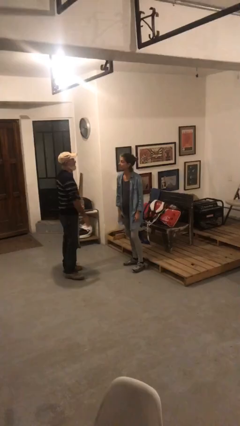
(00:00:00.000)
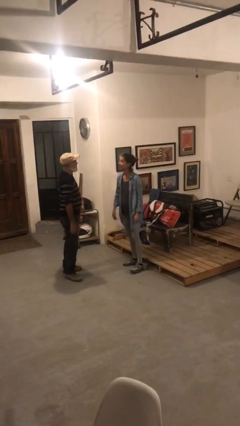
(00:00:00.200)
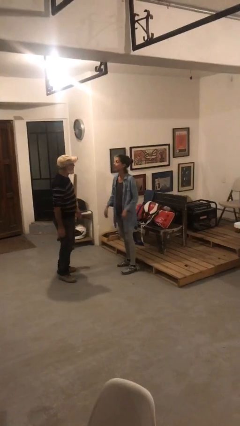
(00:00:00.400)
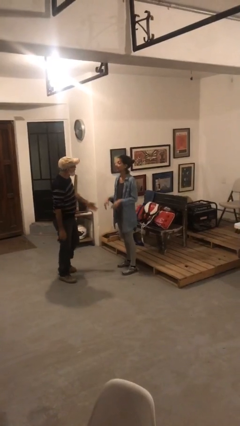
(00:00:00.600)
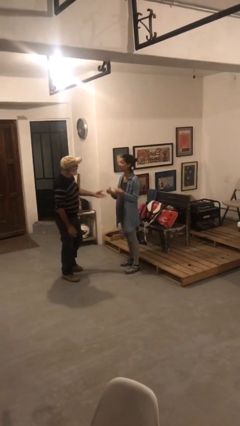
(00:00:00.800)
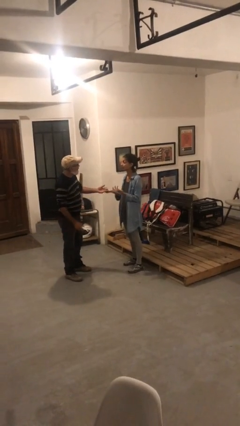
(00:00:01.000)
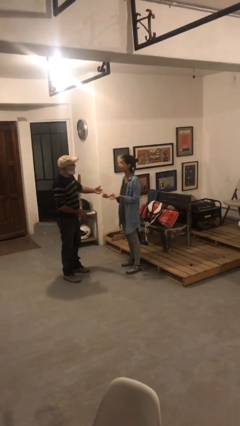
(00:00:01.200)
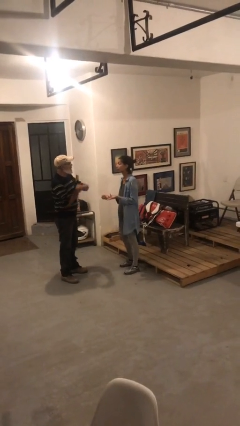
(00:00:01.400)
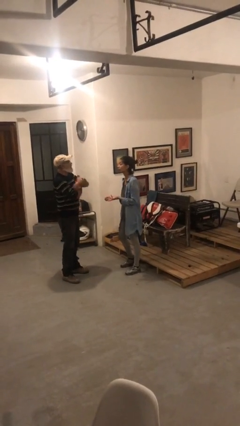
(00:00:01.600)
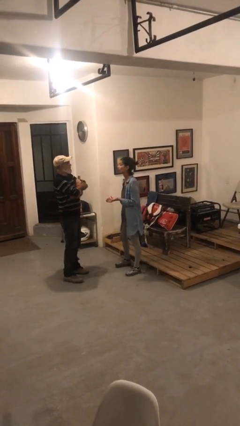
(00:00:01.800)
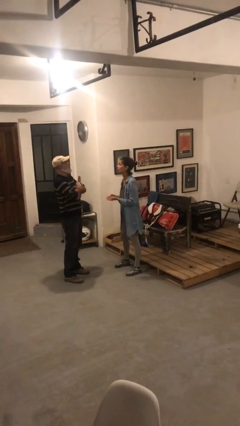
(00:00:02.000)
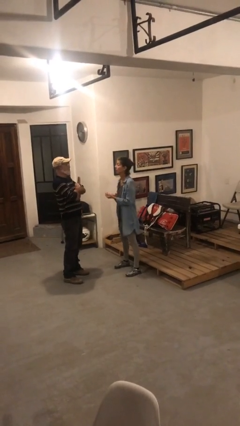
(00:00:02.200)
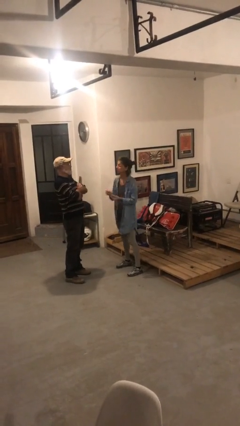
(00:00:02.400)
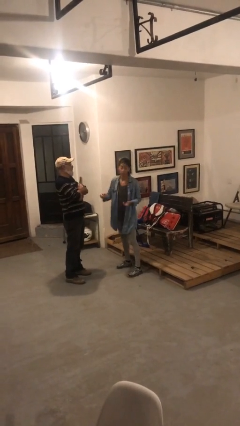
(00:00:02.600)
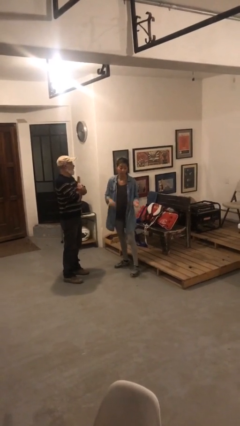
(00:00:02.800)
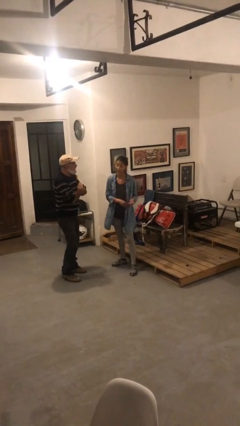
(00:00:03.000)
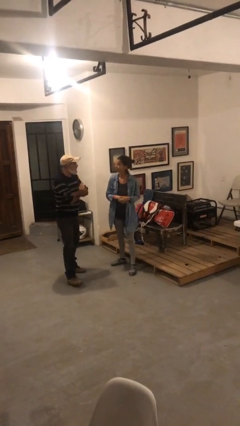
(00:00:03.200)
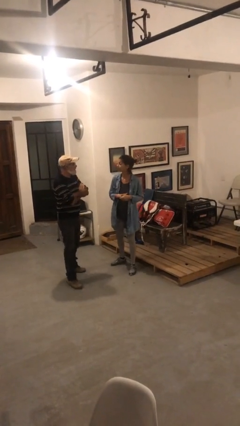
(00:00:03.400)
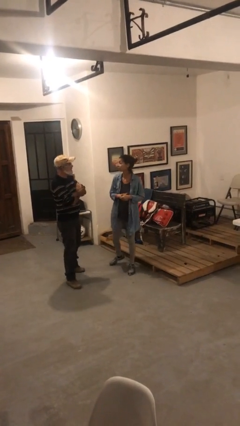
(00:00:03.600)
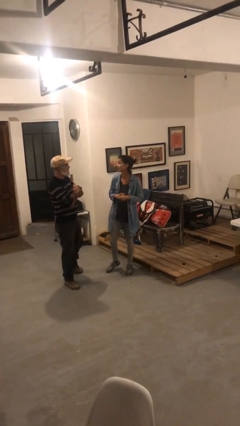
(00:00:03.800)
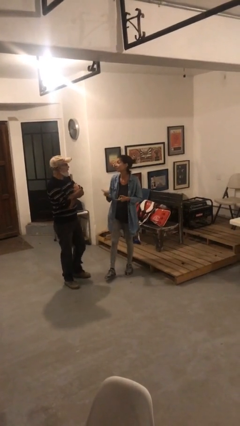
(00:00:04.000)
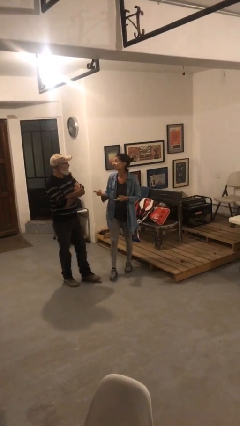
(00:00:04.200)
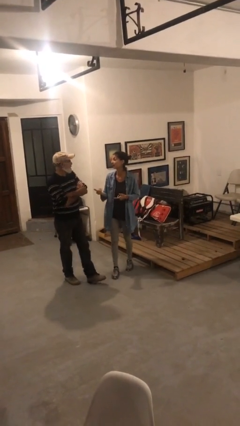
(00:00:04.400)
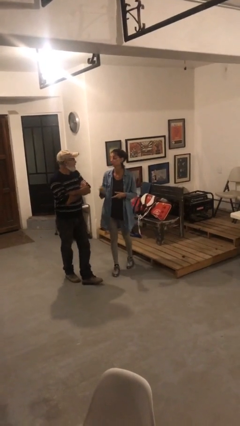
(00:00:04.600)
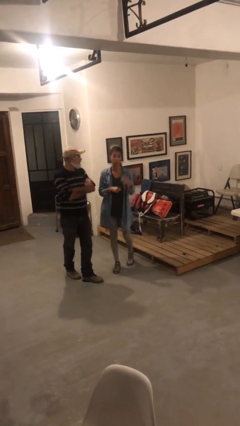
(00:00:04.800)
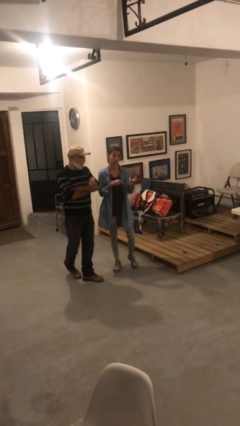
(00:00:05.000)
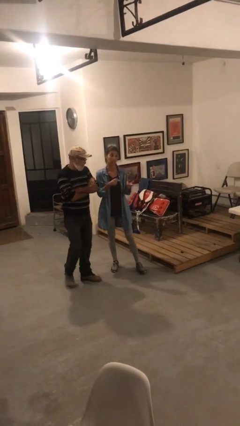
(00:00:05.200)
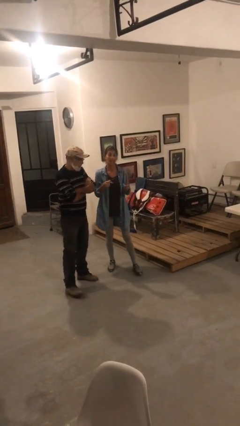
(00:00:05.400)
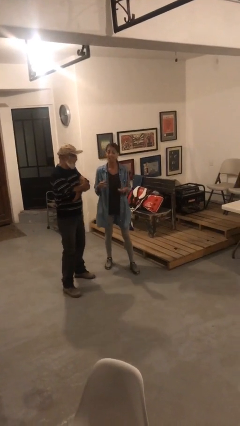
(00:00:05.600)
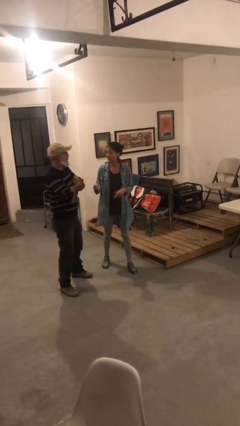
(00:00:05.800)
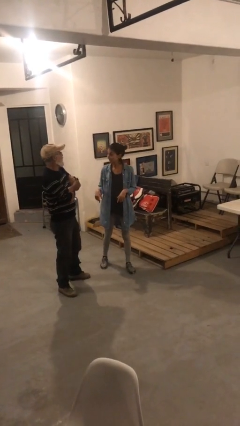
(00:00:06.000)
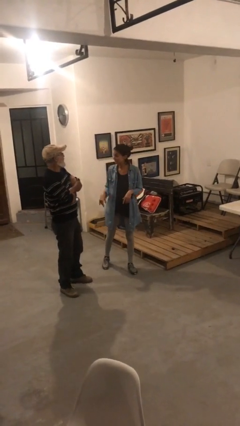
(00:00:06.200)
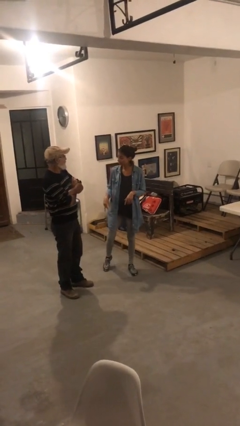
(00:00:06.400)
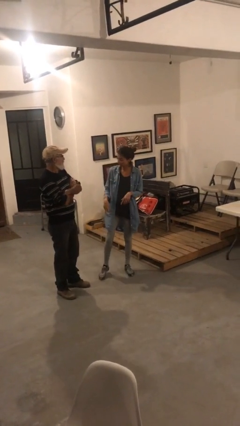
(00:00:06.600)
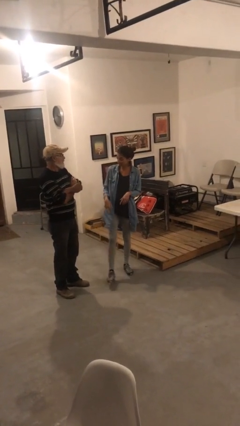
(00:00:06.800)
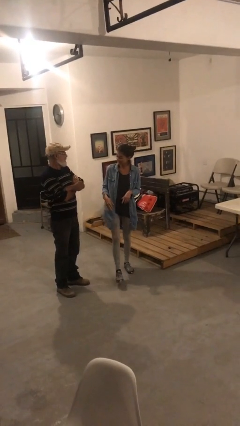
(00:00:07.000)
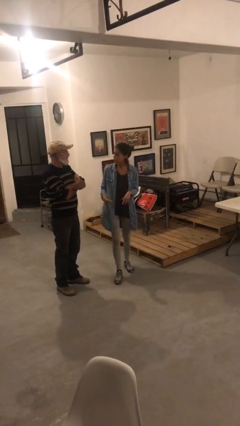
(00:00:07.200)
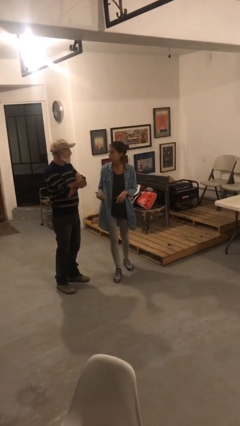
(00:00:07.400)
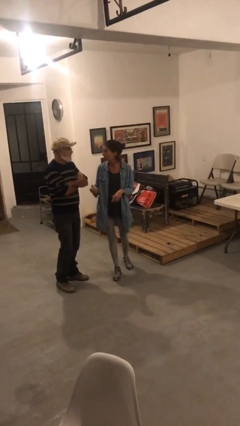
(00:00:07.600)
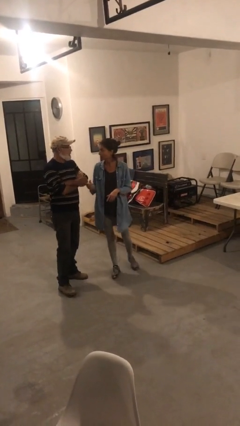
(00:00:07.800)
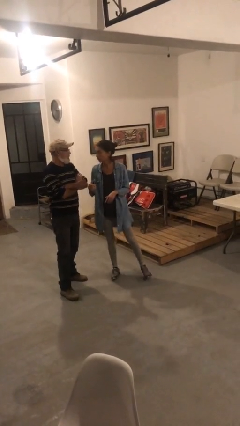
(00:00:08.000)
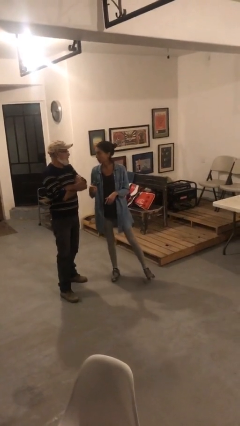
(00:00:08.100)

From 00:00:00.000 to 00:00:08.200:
person talks to person

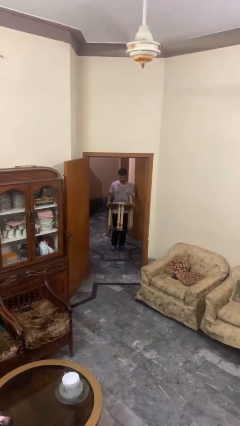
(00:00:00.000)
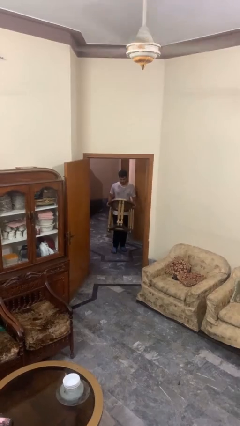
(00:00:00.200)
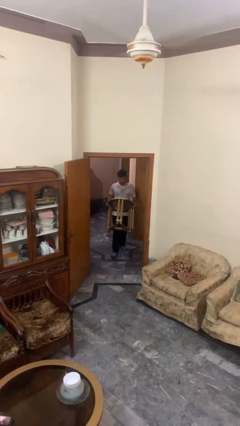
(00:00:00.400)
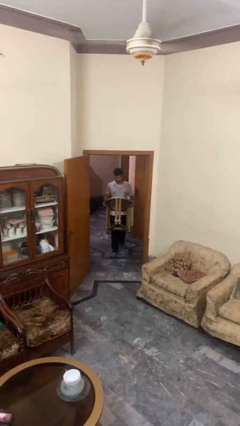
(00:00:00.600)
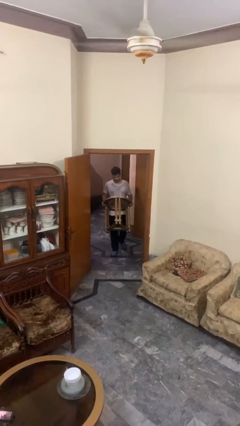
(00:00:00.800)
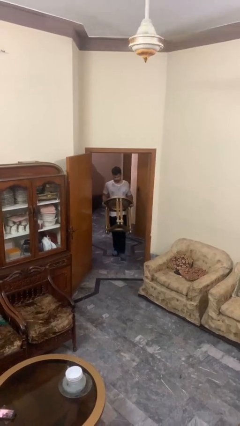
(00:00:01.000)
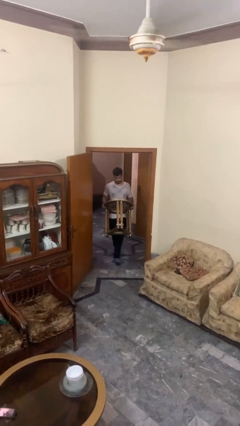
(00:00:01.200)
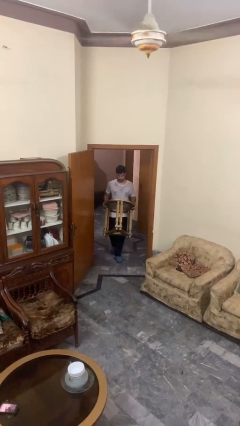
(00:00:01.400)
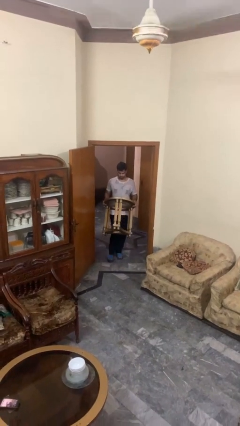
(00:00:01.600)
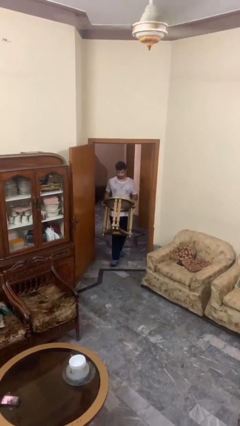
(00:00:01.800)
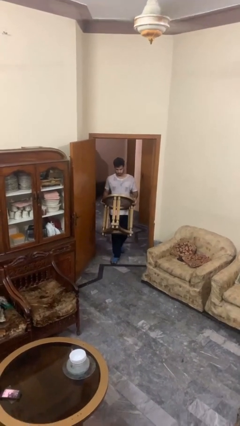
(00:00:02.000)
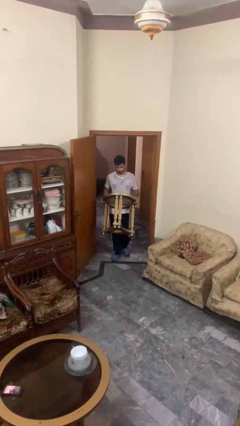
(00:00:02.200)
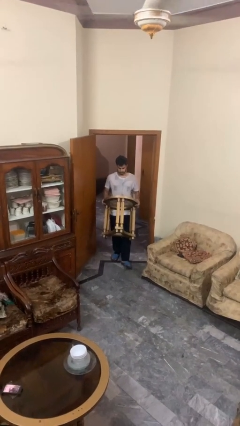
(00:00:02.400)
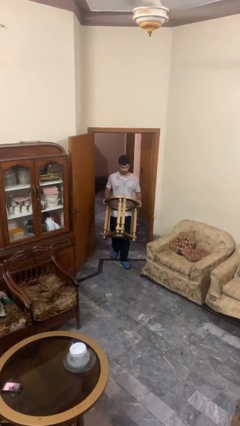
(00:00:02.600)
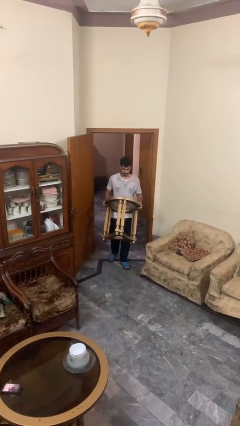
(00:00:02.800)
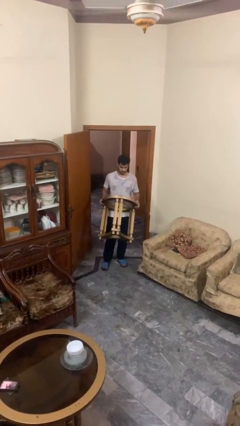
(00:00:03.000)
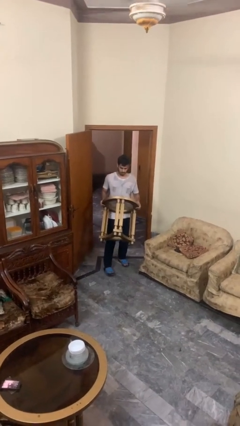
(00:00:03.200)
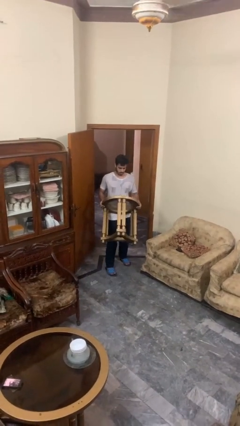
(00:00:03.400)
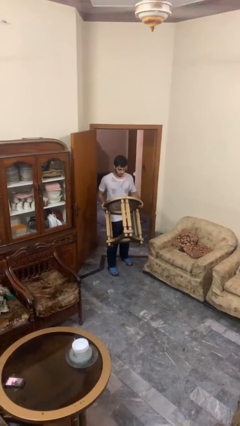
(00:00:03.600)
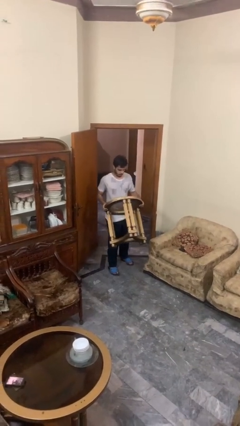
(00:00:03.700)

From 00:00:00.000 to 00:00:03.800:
person carries furniture

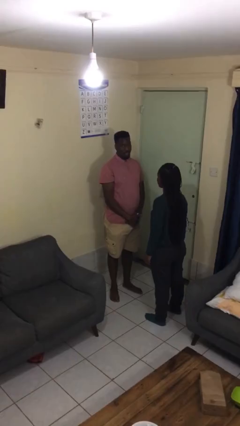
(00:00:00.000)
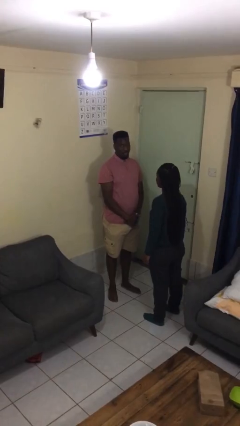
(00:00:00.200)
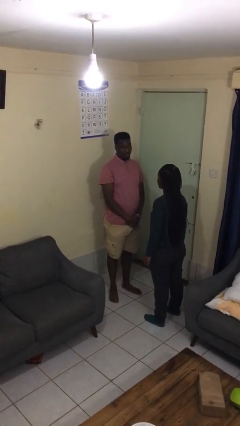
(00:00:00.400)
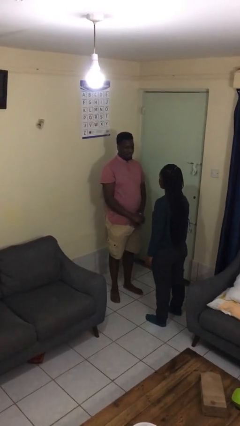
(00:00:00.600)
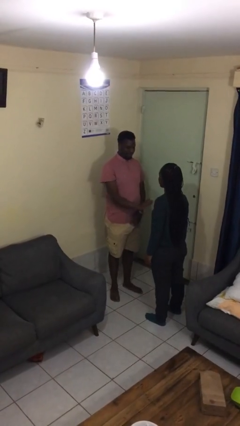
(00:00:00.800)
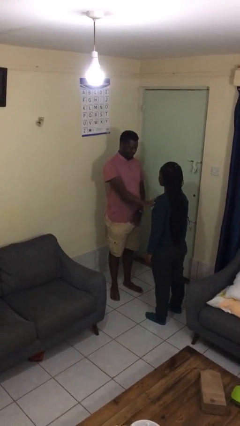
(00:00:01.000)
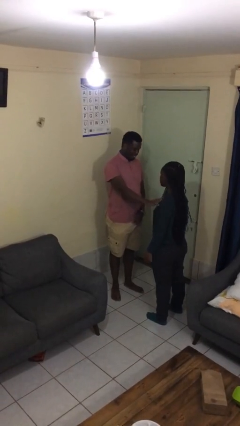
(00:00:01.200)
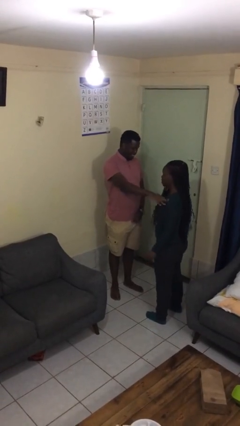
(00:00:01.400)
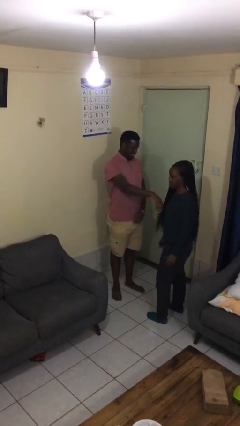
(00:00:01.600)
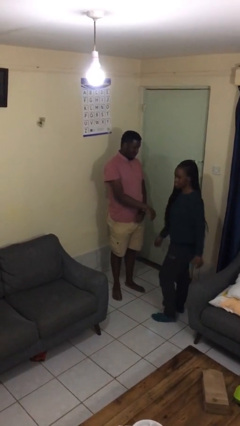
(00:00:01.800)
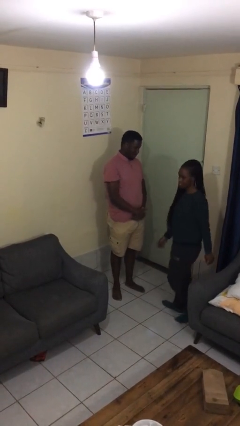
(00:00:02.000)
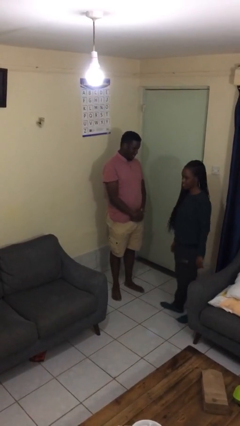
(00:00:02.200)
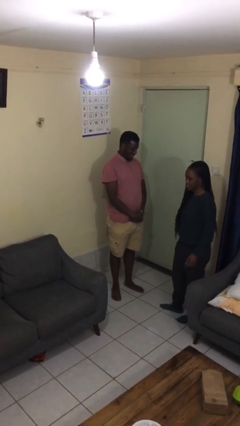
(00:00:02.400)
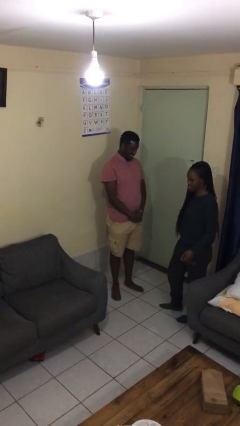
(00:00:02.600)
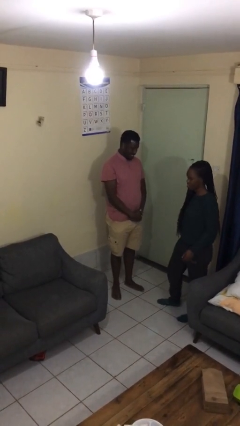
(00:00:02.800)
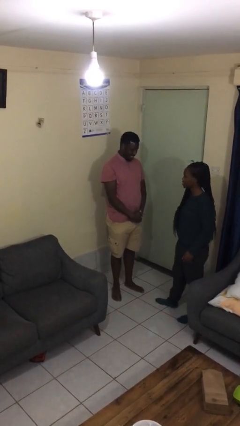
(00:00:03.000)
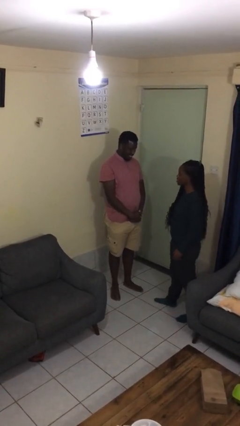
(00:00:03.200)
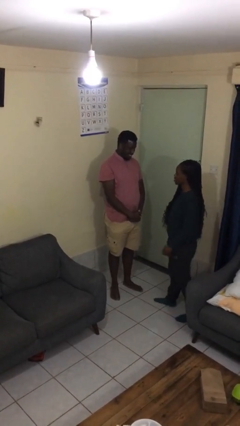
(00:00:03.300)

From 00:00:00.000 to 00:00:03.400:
person shoves person

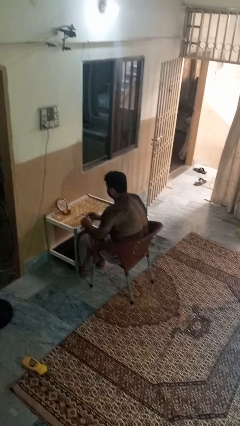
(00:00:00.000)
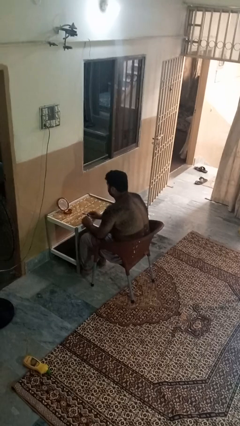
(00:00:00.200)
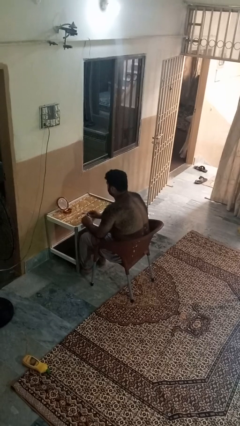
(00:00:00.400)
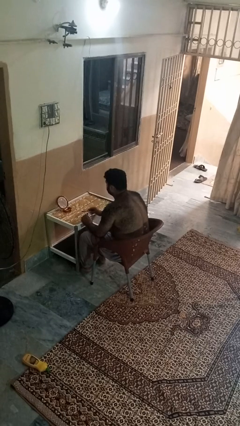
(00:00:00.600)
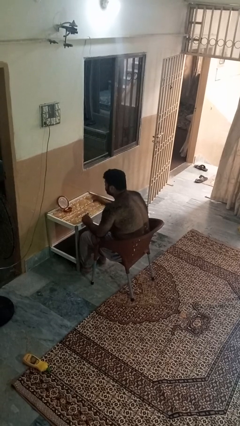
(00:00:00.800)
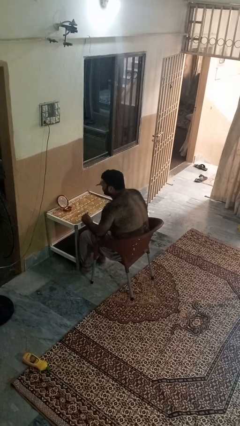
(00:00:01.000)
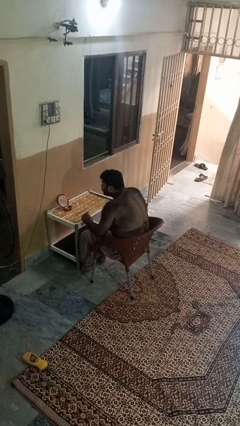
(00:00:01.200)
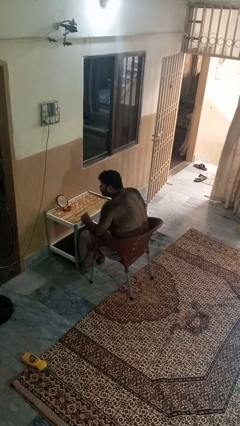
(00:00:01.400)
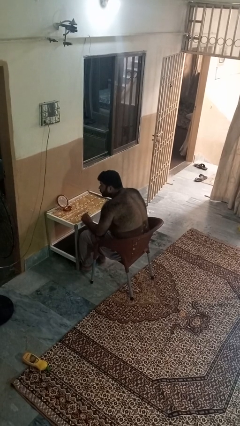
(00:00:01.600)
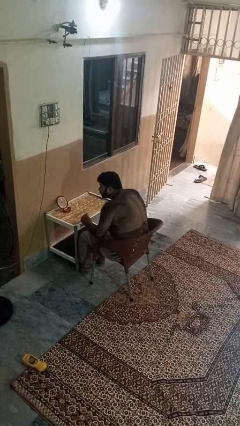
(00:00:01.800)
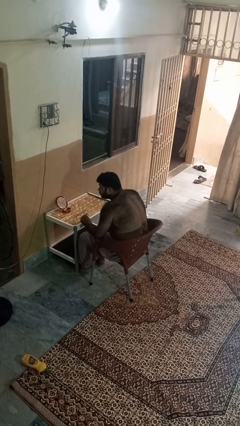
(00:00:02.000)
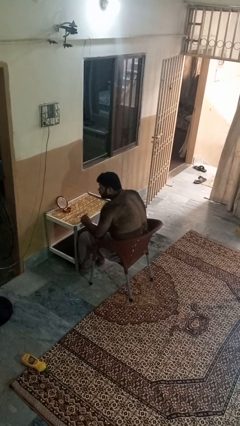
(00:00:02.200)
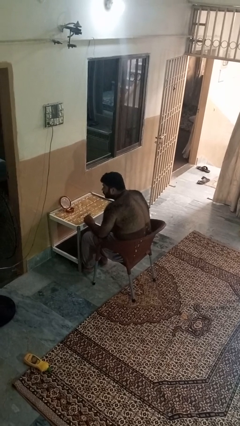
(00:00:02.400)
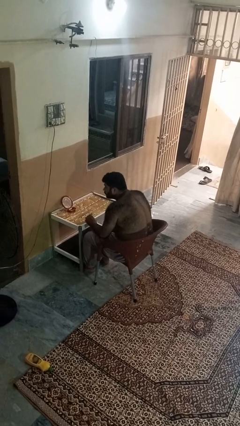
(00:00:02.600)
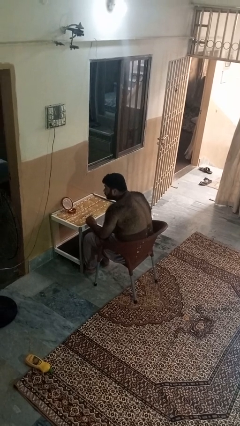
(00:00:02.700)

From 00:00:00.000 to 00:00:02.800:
person applies eye makeup
